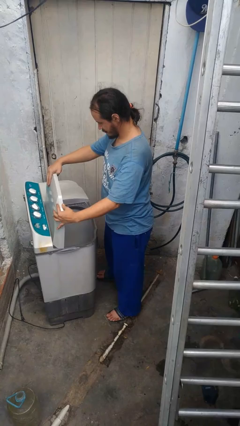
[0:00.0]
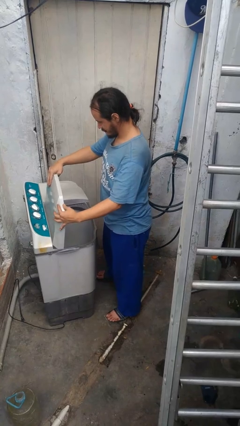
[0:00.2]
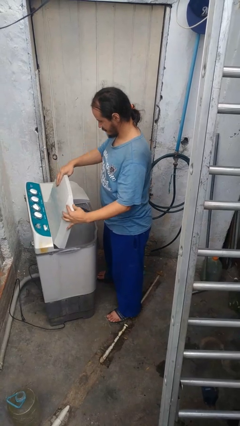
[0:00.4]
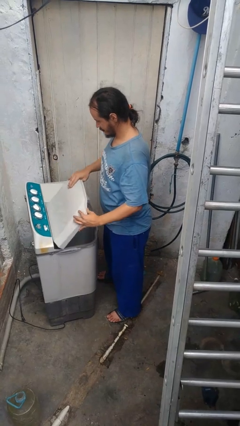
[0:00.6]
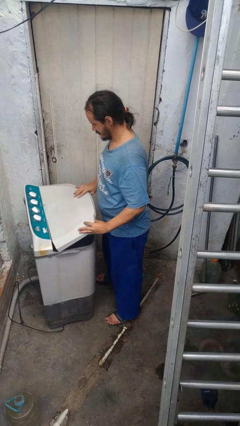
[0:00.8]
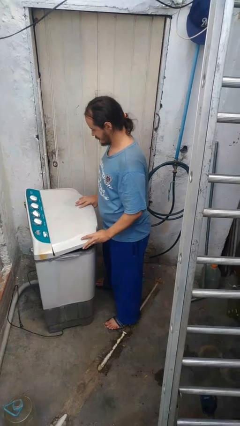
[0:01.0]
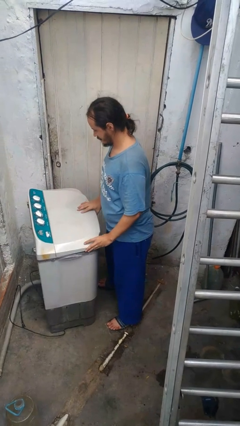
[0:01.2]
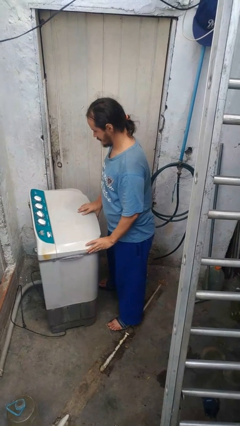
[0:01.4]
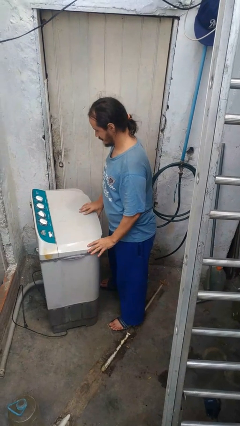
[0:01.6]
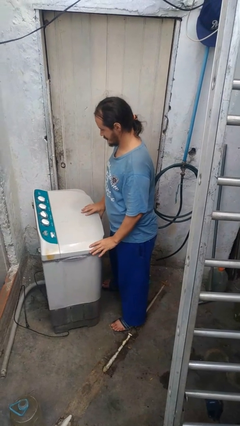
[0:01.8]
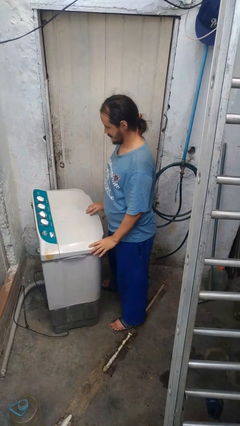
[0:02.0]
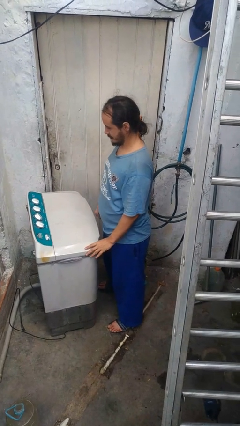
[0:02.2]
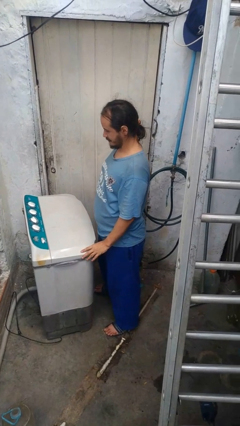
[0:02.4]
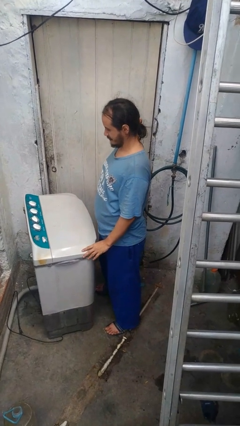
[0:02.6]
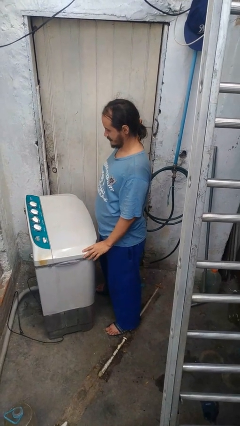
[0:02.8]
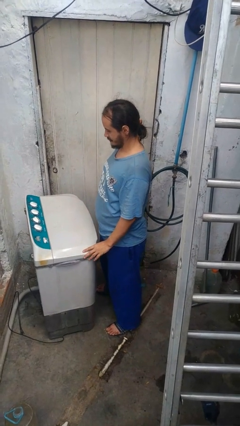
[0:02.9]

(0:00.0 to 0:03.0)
person closes clothes washer

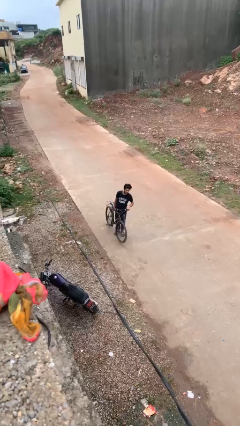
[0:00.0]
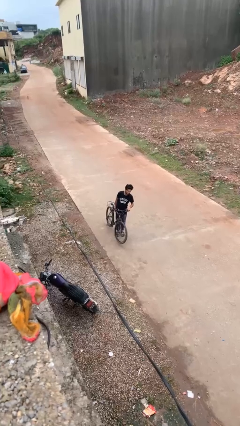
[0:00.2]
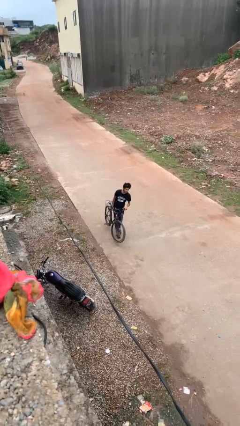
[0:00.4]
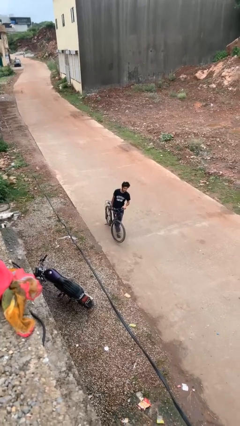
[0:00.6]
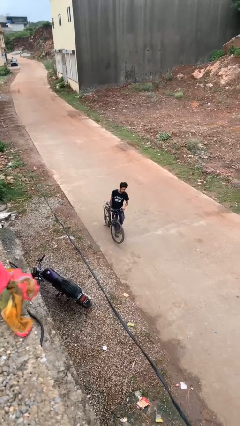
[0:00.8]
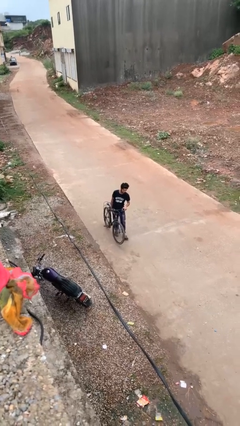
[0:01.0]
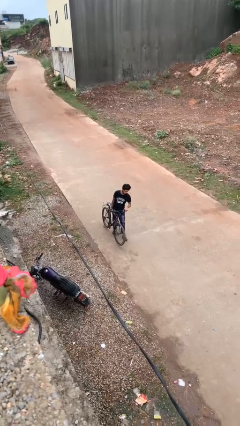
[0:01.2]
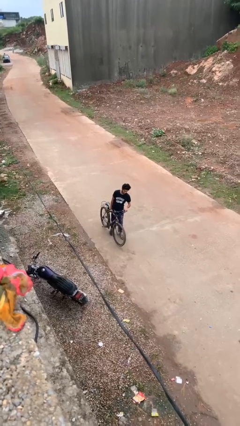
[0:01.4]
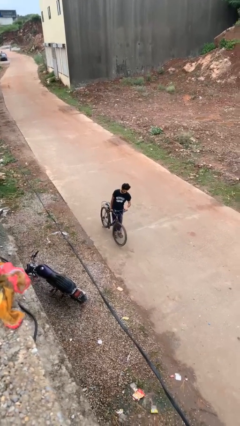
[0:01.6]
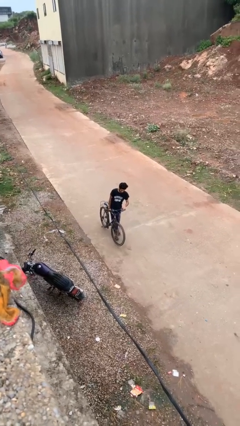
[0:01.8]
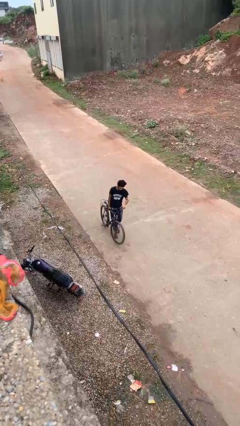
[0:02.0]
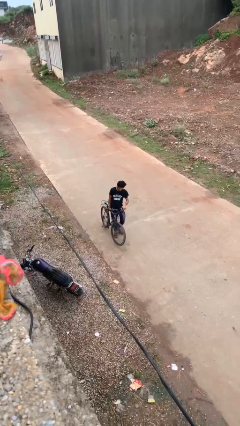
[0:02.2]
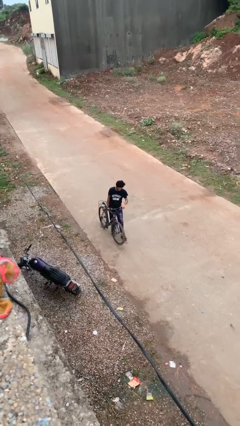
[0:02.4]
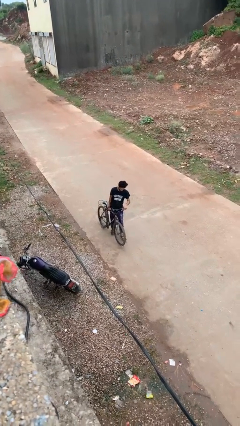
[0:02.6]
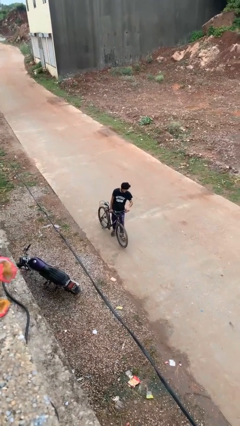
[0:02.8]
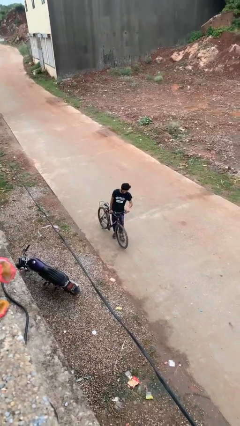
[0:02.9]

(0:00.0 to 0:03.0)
person carries bicycle

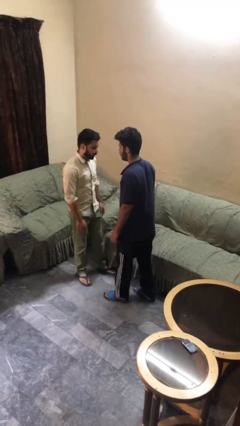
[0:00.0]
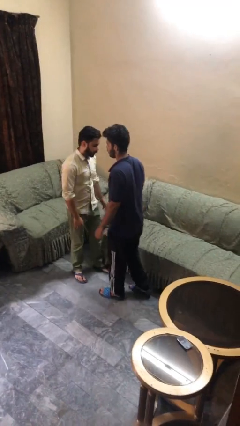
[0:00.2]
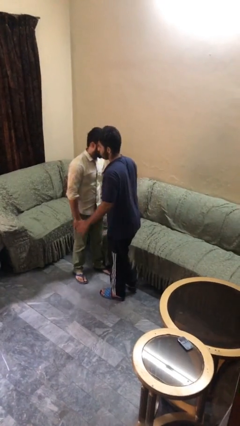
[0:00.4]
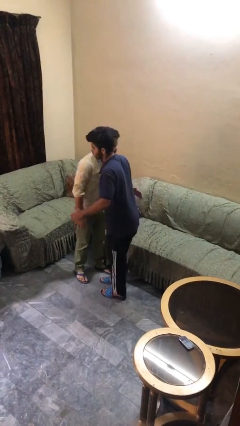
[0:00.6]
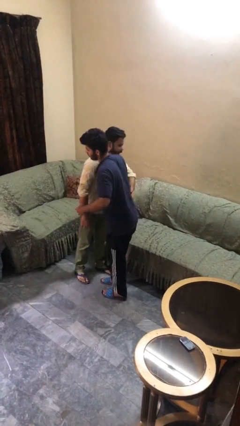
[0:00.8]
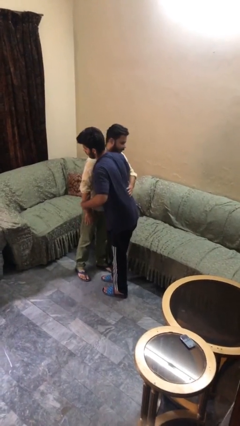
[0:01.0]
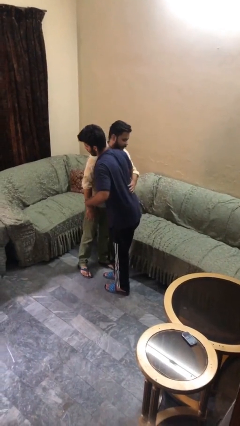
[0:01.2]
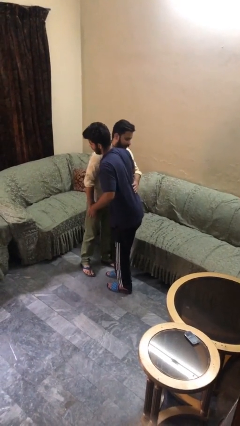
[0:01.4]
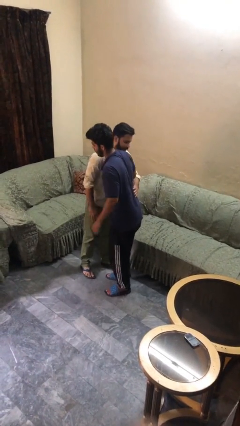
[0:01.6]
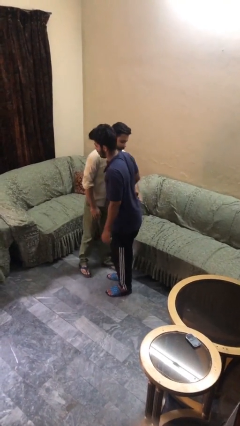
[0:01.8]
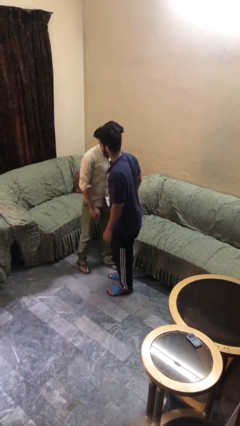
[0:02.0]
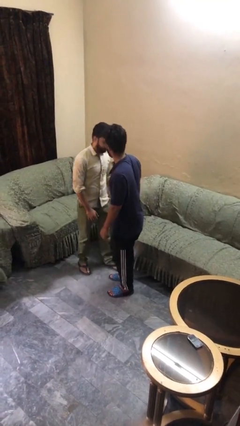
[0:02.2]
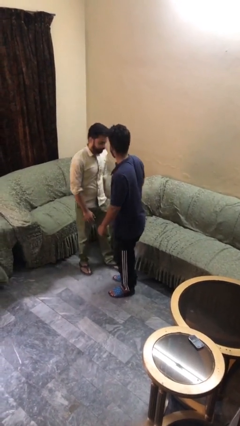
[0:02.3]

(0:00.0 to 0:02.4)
person embraces person

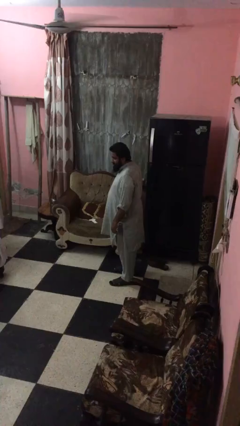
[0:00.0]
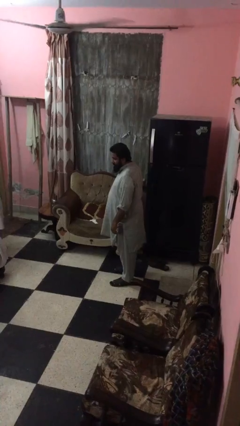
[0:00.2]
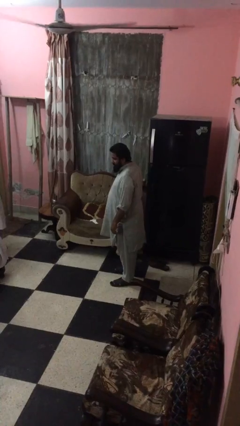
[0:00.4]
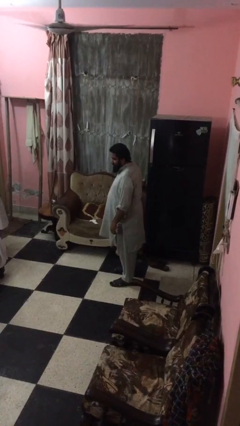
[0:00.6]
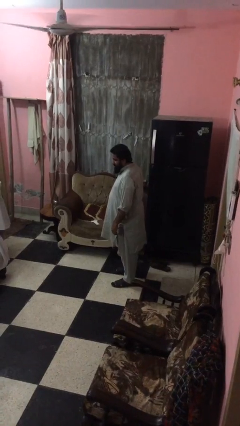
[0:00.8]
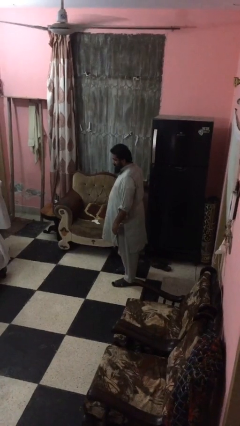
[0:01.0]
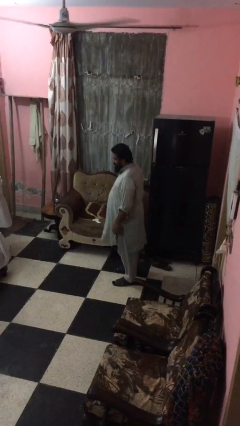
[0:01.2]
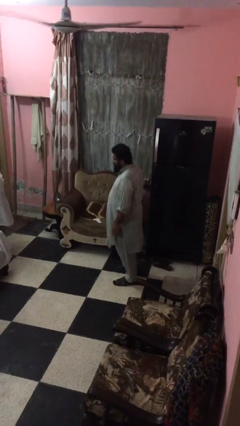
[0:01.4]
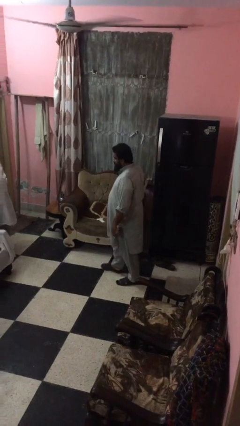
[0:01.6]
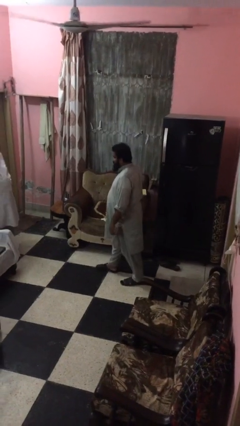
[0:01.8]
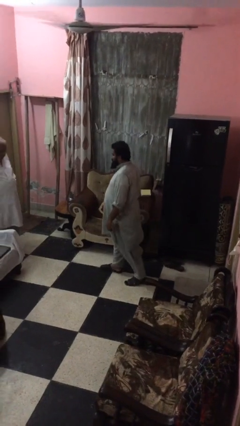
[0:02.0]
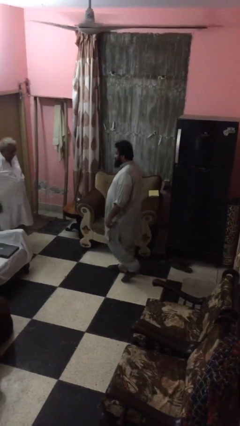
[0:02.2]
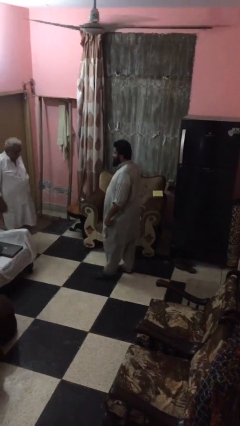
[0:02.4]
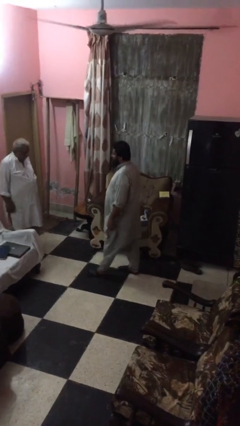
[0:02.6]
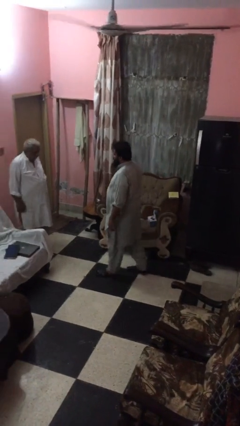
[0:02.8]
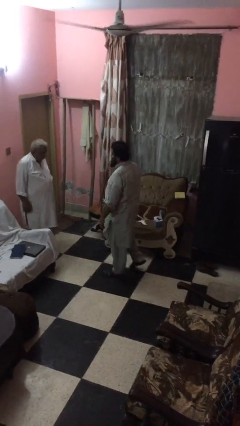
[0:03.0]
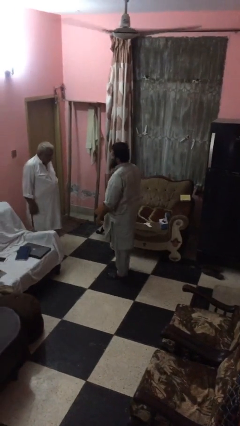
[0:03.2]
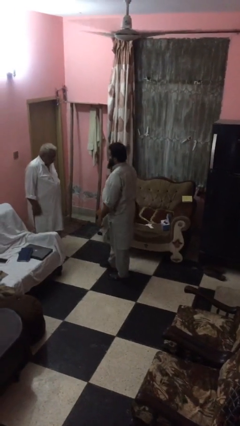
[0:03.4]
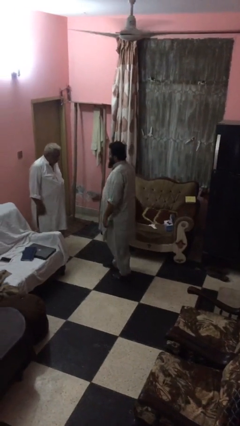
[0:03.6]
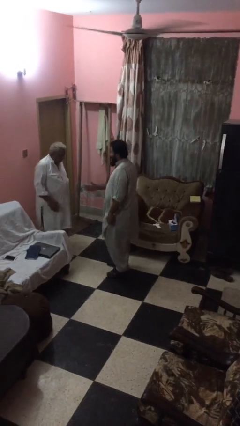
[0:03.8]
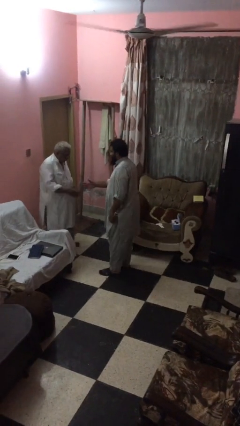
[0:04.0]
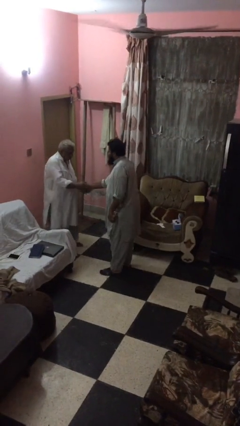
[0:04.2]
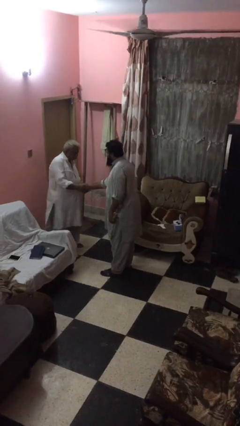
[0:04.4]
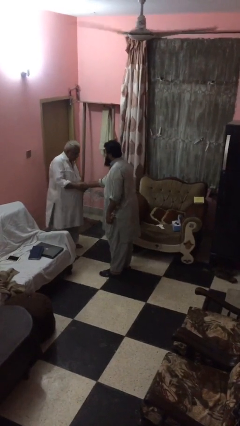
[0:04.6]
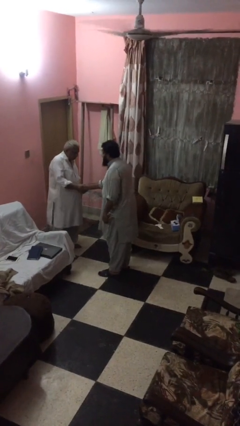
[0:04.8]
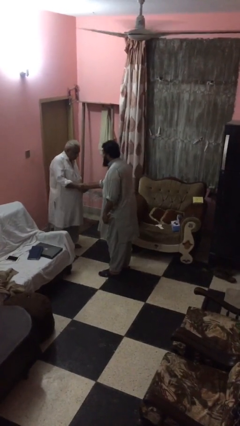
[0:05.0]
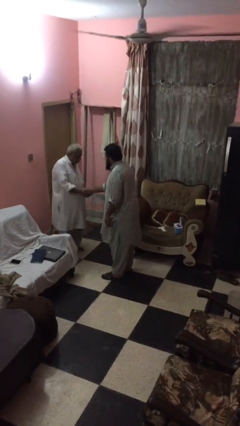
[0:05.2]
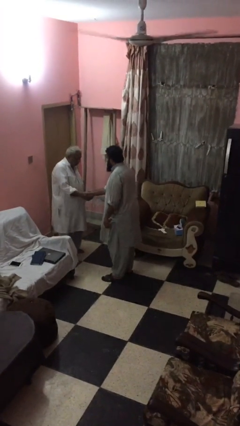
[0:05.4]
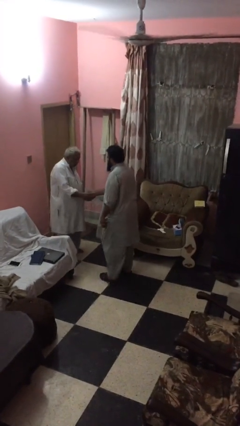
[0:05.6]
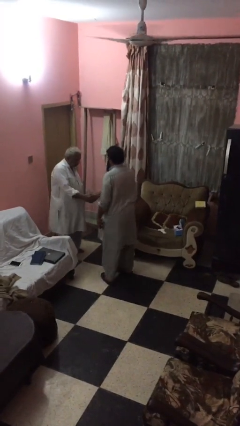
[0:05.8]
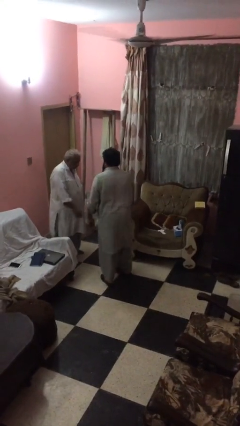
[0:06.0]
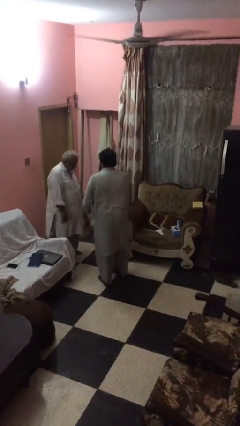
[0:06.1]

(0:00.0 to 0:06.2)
person shakes hand

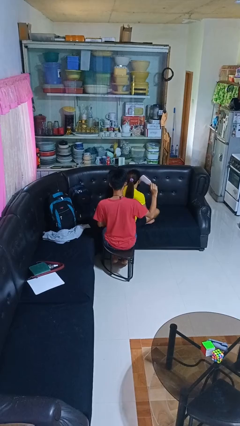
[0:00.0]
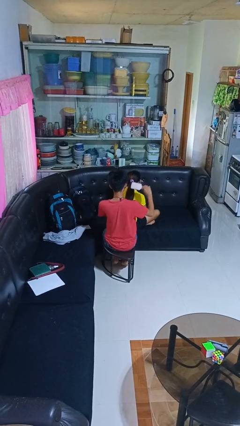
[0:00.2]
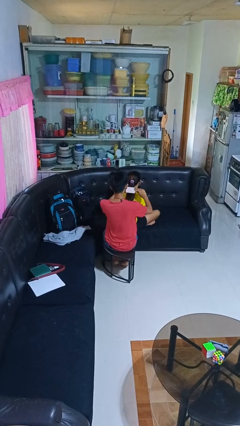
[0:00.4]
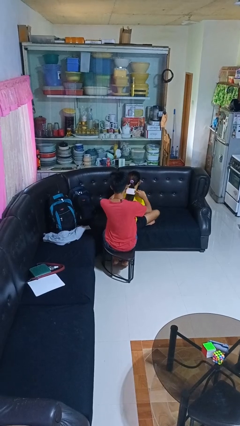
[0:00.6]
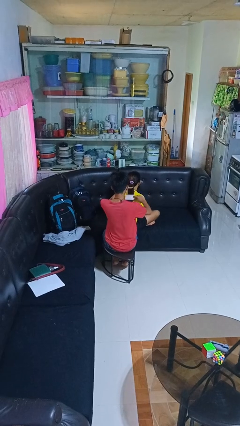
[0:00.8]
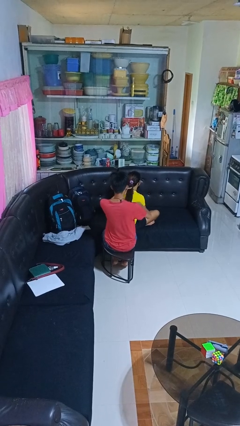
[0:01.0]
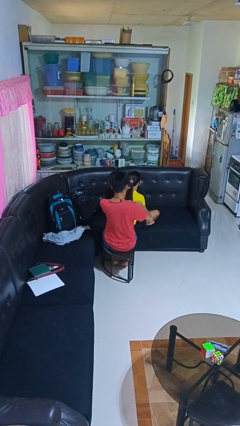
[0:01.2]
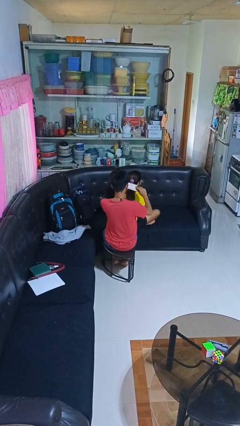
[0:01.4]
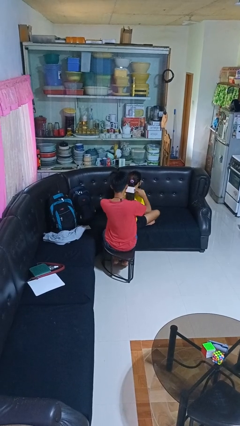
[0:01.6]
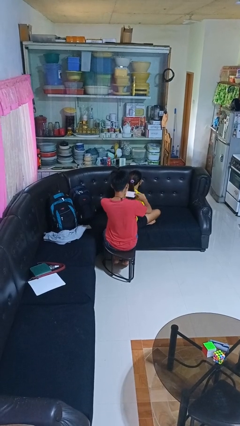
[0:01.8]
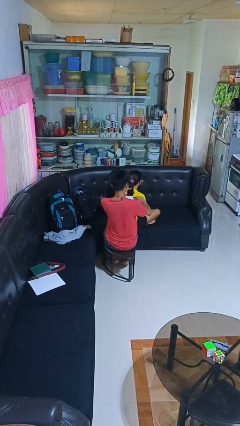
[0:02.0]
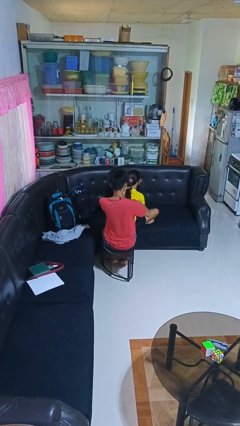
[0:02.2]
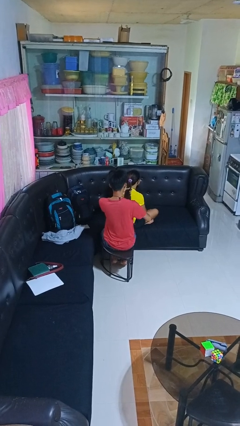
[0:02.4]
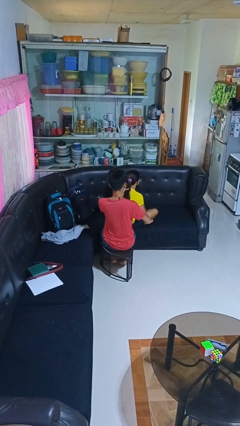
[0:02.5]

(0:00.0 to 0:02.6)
person brushes hair of person
